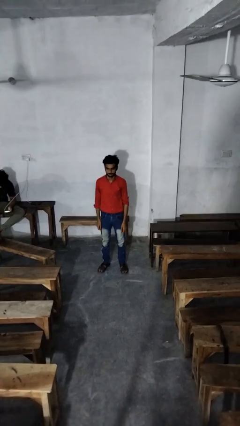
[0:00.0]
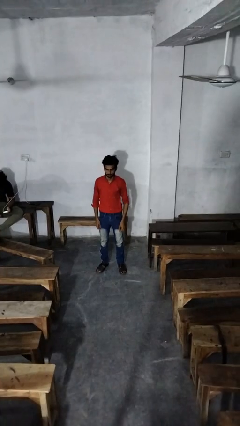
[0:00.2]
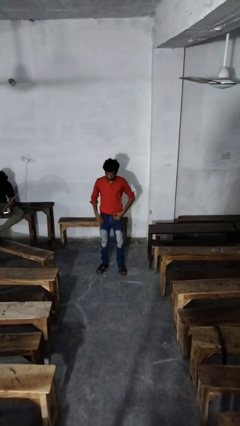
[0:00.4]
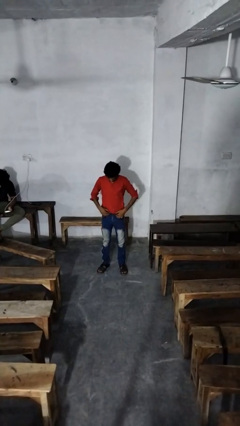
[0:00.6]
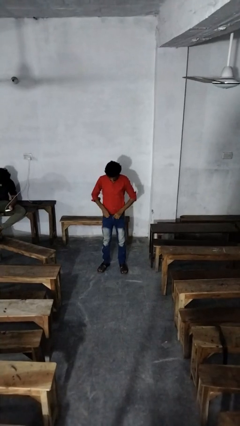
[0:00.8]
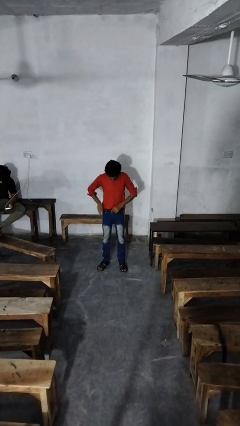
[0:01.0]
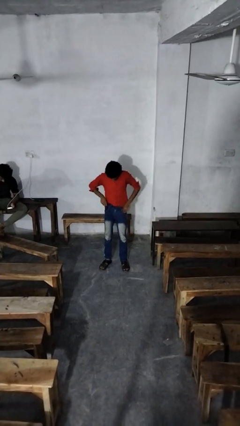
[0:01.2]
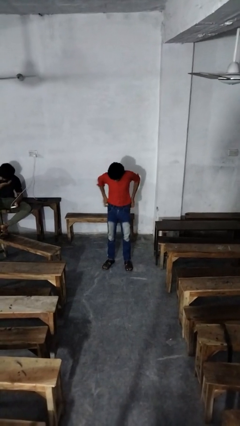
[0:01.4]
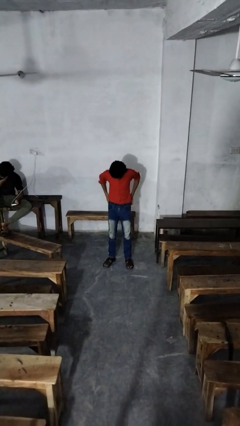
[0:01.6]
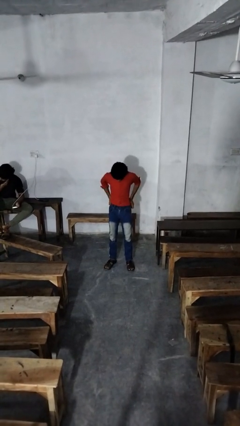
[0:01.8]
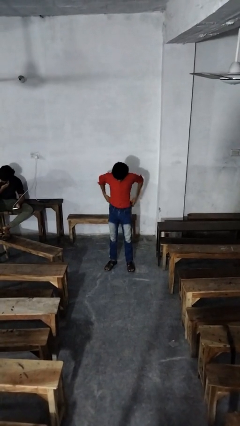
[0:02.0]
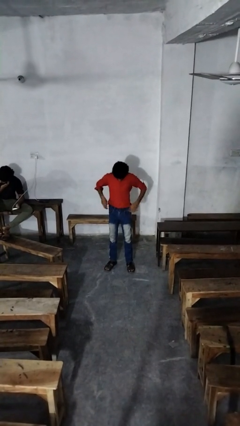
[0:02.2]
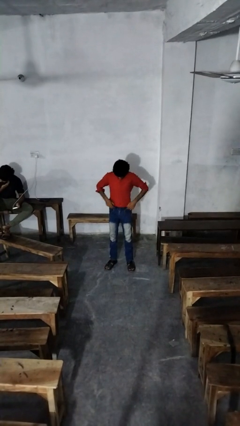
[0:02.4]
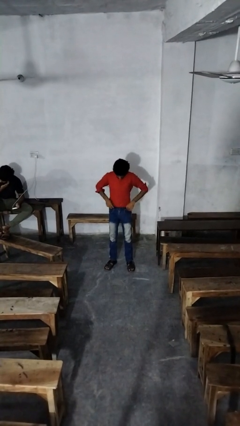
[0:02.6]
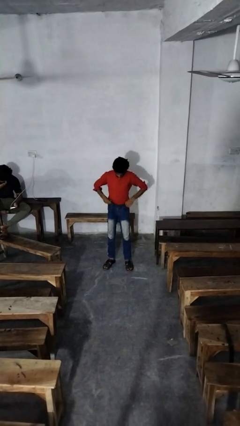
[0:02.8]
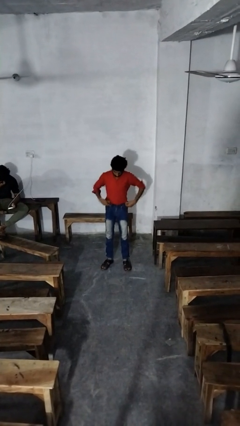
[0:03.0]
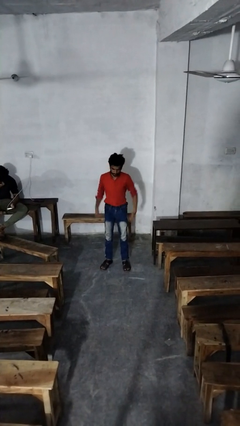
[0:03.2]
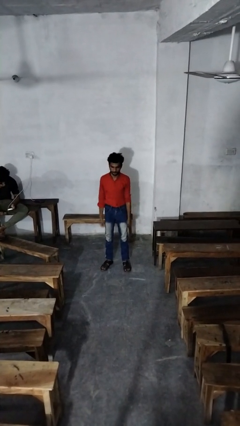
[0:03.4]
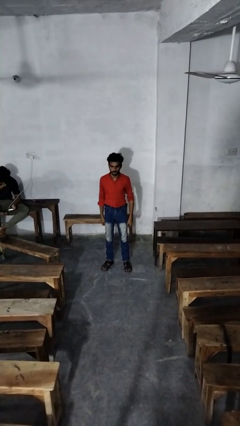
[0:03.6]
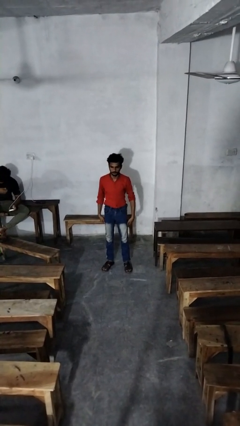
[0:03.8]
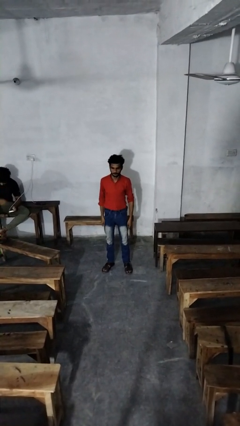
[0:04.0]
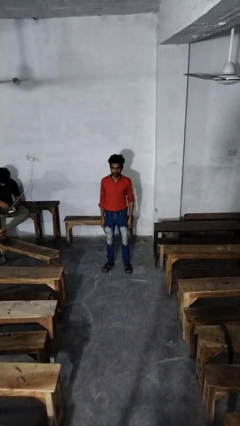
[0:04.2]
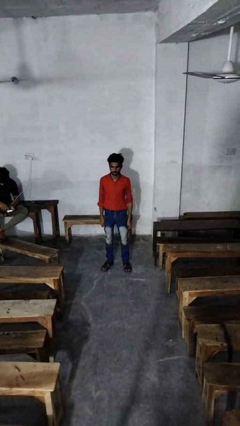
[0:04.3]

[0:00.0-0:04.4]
person hikes up pants

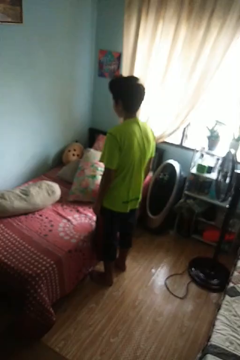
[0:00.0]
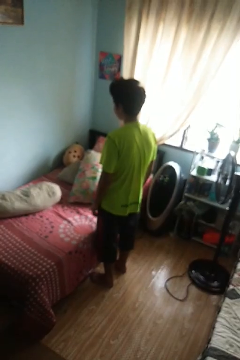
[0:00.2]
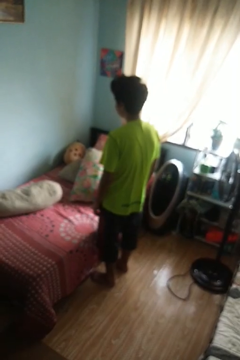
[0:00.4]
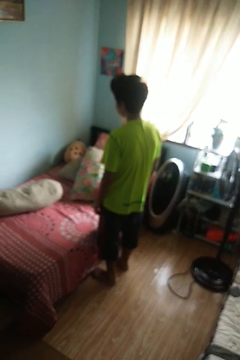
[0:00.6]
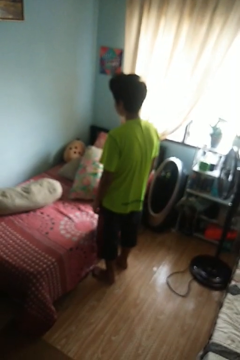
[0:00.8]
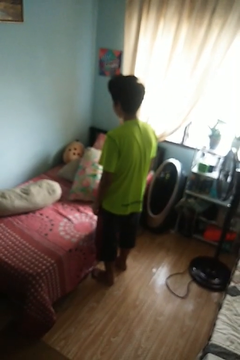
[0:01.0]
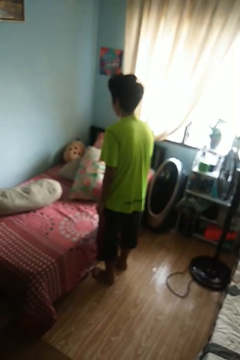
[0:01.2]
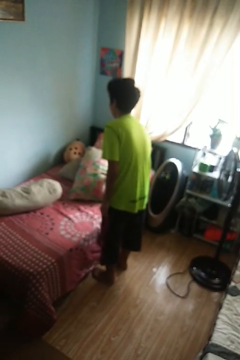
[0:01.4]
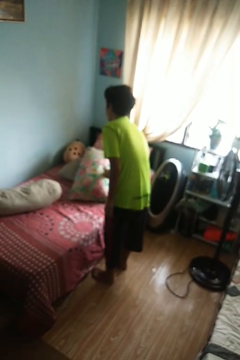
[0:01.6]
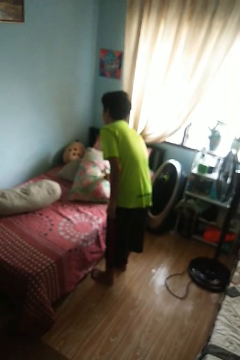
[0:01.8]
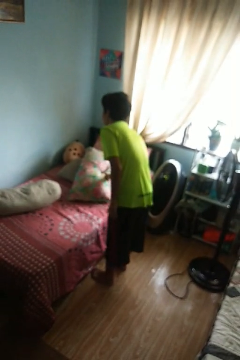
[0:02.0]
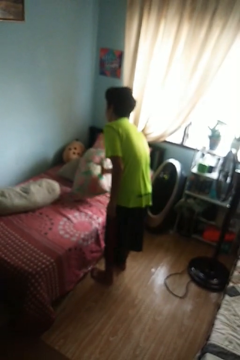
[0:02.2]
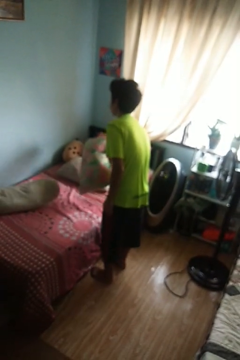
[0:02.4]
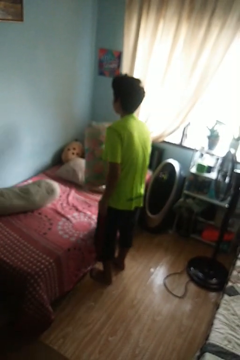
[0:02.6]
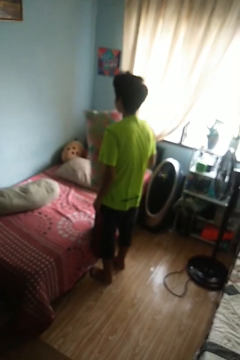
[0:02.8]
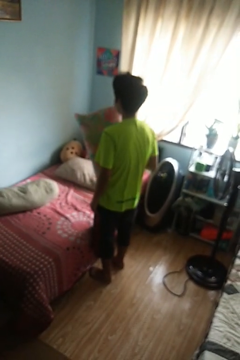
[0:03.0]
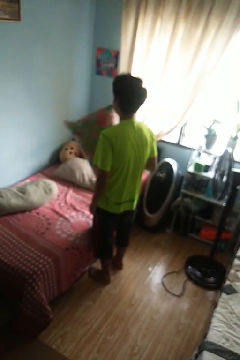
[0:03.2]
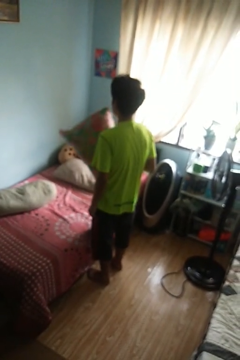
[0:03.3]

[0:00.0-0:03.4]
person picks up object from bed

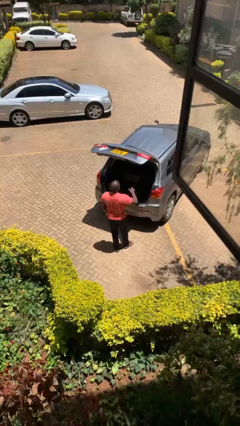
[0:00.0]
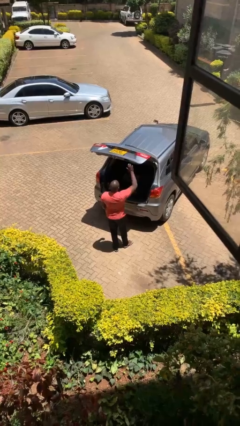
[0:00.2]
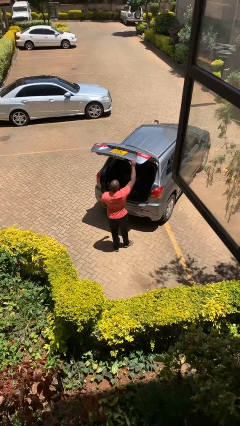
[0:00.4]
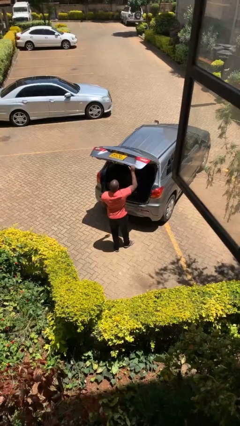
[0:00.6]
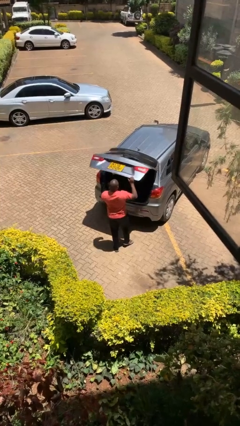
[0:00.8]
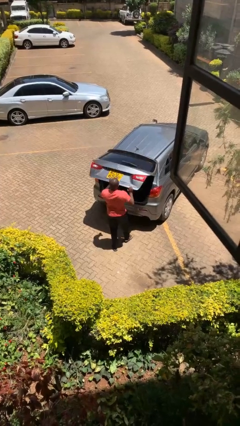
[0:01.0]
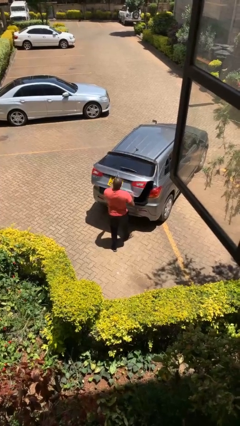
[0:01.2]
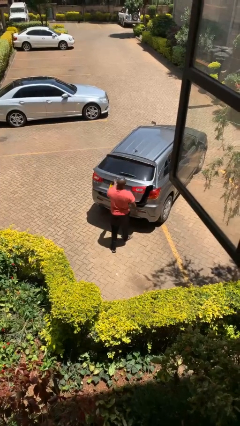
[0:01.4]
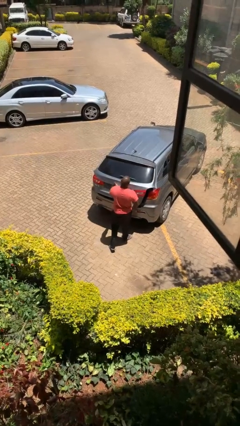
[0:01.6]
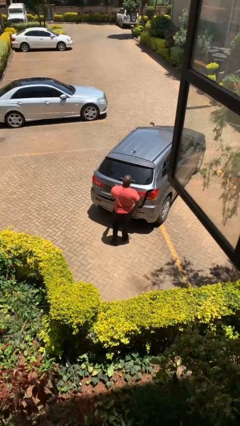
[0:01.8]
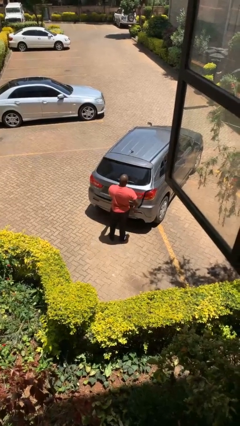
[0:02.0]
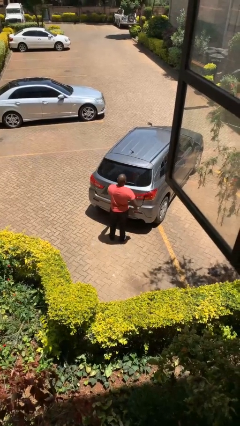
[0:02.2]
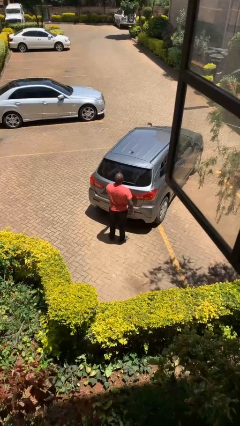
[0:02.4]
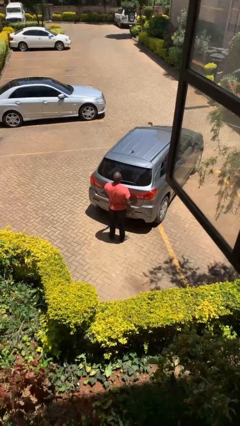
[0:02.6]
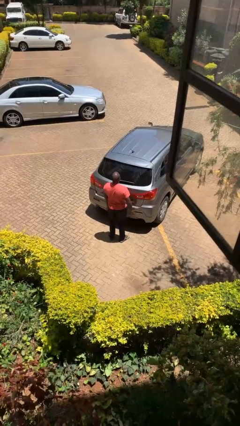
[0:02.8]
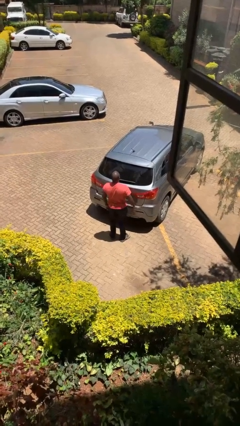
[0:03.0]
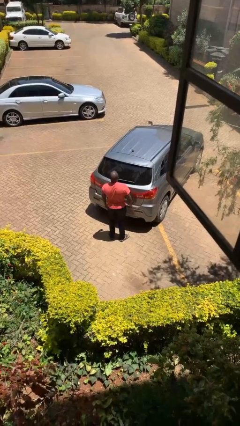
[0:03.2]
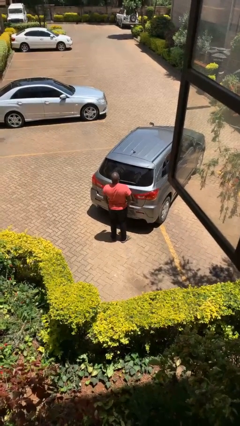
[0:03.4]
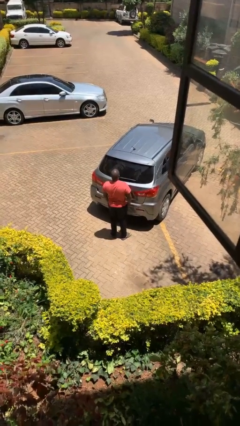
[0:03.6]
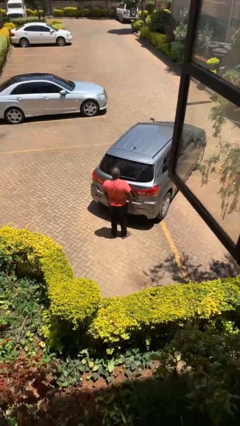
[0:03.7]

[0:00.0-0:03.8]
person closes car trunk

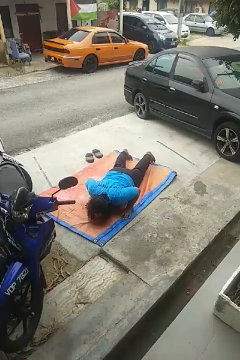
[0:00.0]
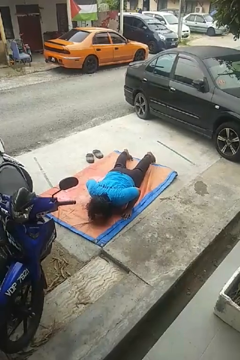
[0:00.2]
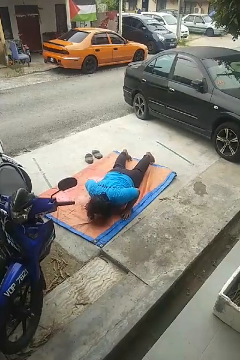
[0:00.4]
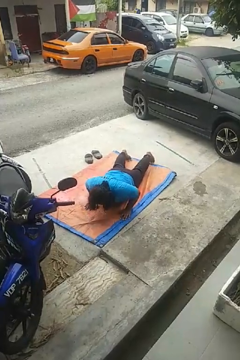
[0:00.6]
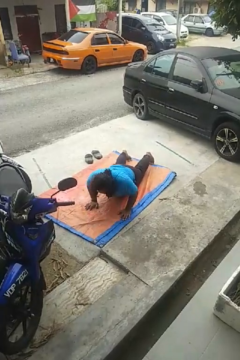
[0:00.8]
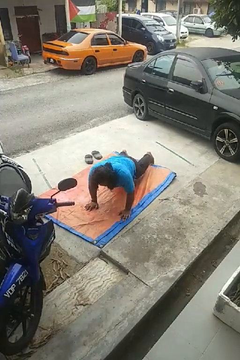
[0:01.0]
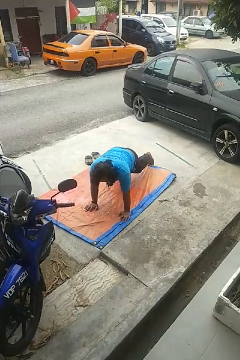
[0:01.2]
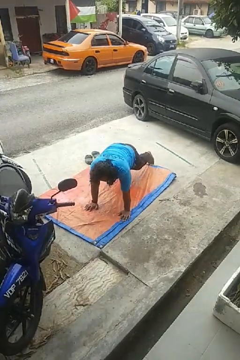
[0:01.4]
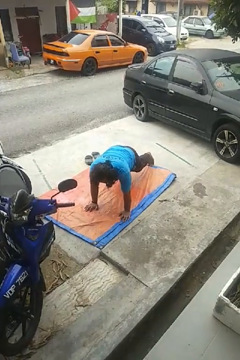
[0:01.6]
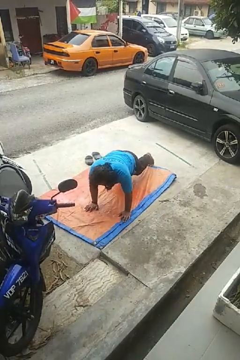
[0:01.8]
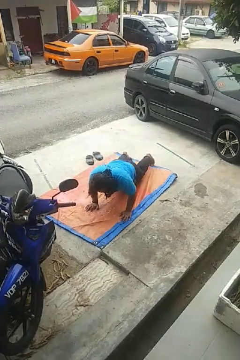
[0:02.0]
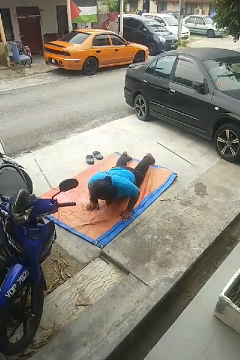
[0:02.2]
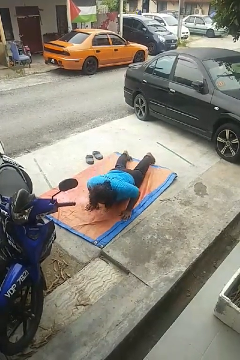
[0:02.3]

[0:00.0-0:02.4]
person exercises with pushup

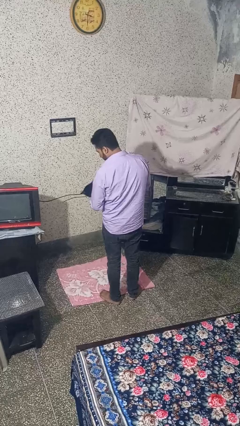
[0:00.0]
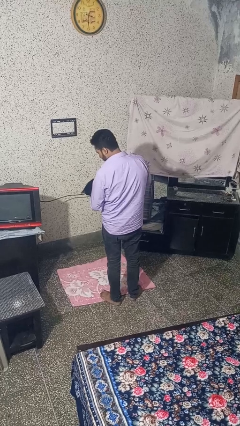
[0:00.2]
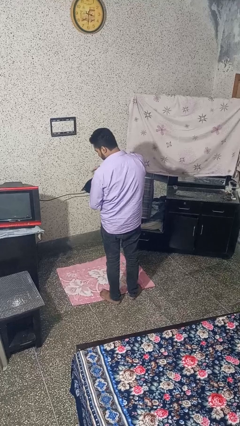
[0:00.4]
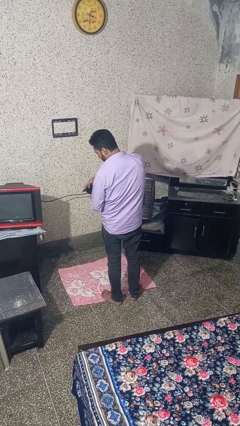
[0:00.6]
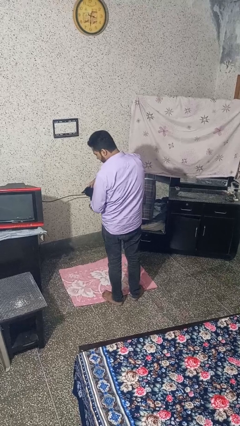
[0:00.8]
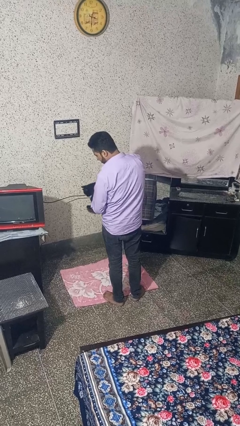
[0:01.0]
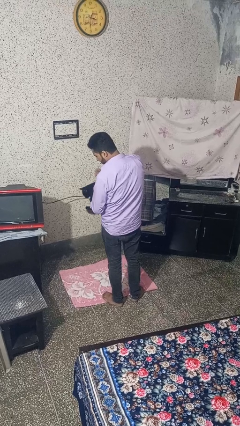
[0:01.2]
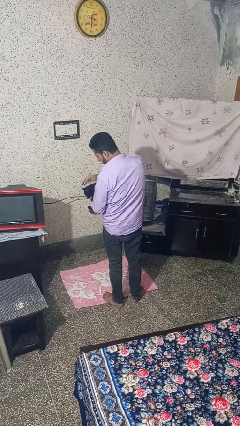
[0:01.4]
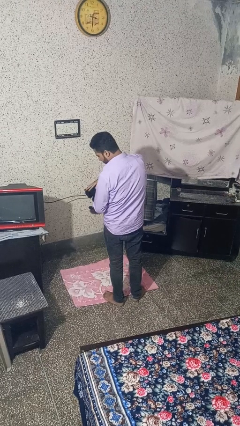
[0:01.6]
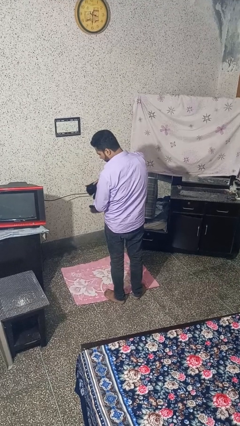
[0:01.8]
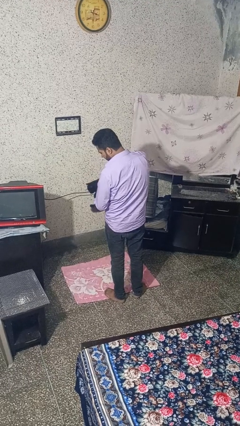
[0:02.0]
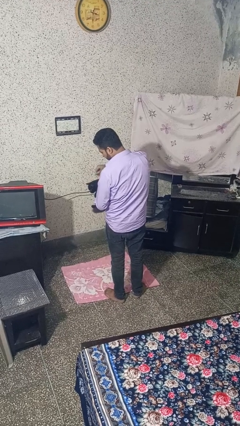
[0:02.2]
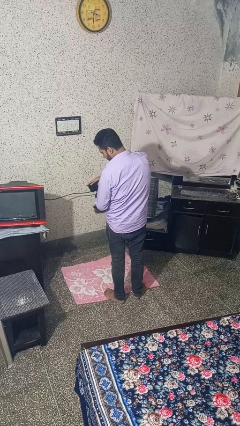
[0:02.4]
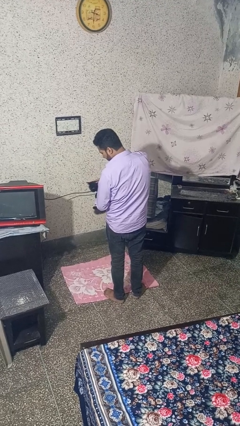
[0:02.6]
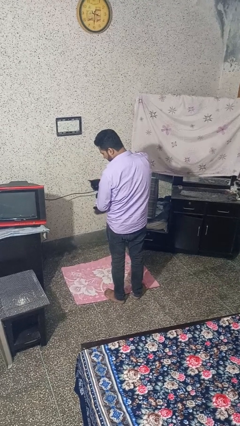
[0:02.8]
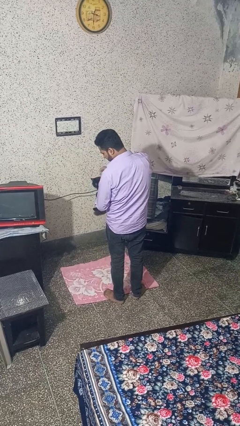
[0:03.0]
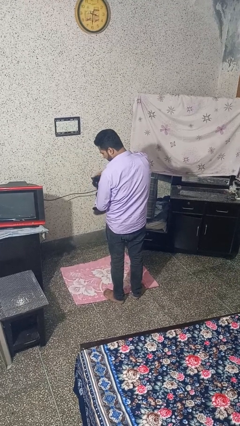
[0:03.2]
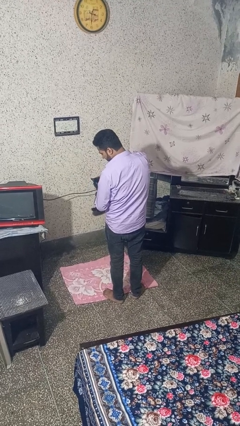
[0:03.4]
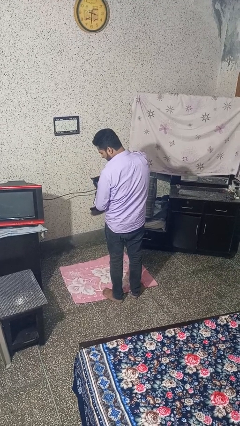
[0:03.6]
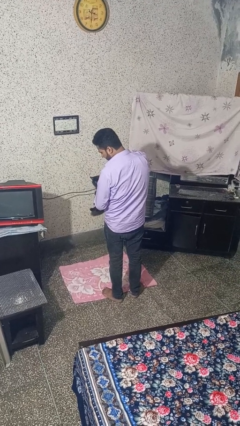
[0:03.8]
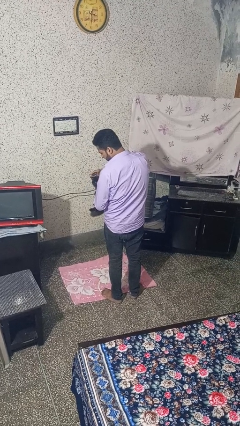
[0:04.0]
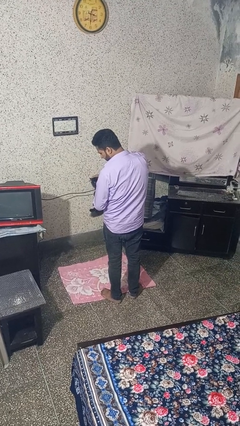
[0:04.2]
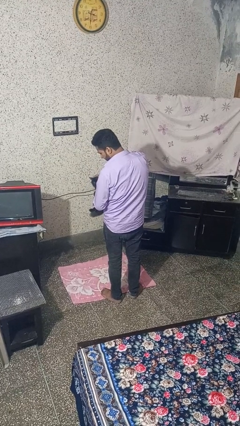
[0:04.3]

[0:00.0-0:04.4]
person pets cat
